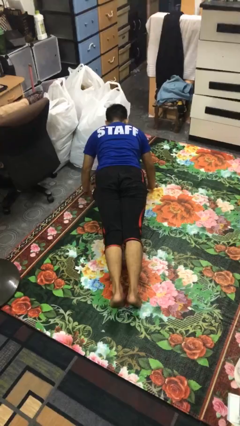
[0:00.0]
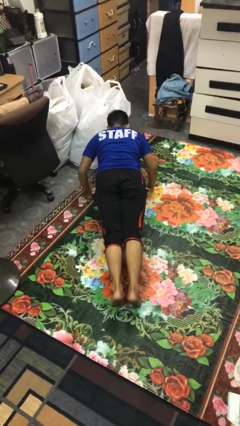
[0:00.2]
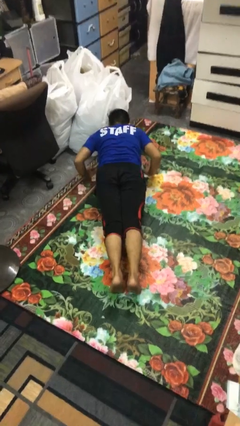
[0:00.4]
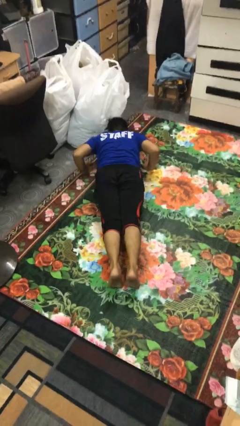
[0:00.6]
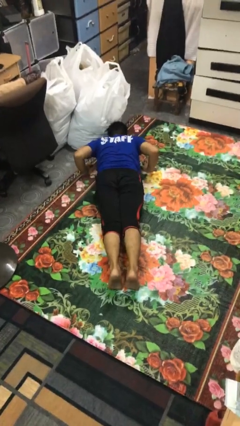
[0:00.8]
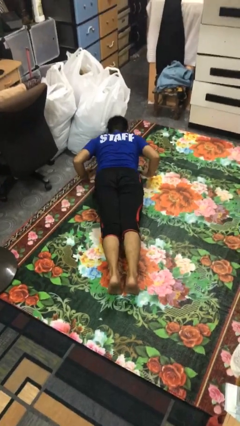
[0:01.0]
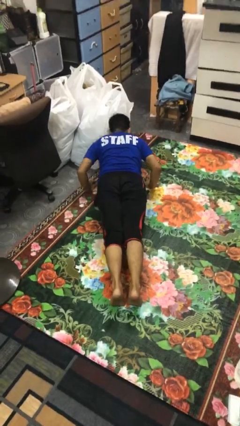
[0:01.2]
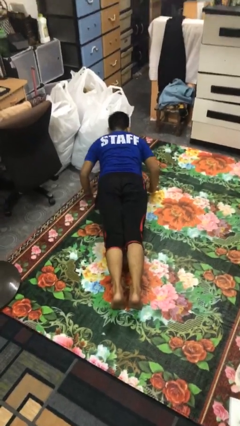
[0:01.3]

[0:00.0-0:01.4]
person exercises with pushup

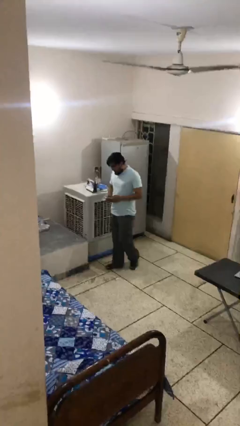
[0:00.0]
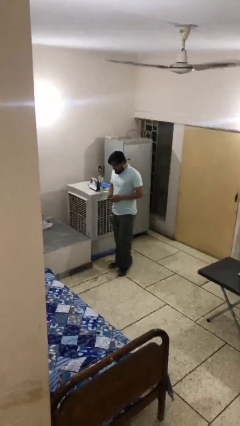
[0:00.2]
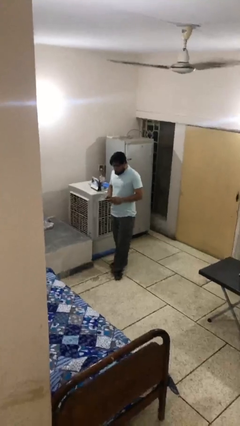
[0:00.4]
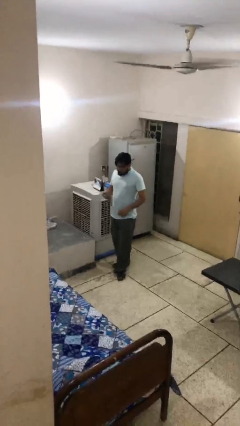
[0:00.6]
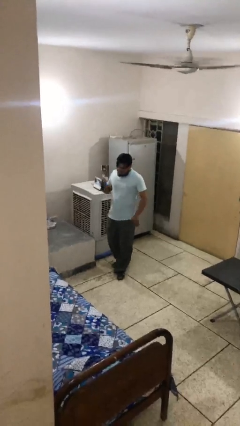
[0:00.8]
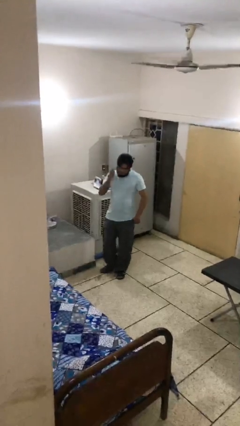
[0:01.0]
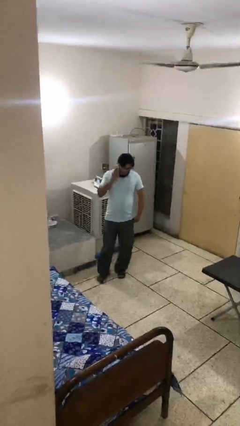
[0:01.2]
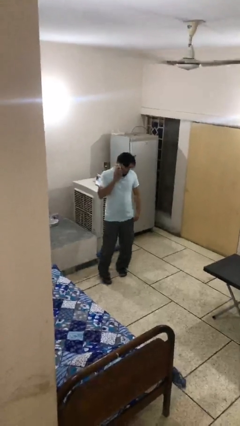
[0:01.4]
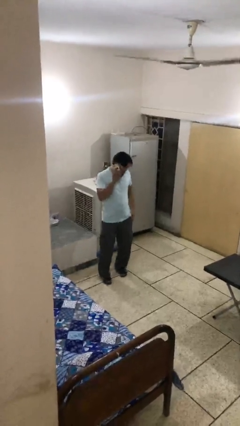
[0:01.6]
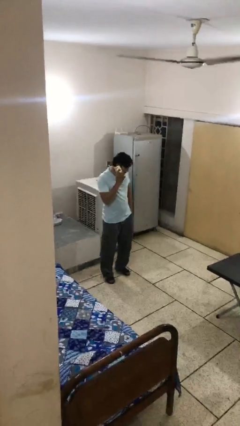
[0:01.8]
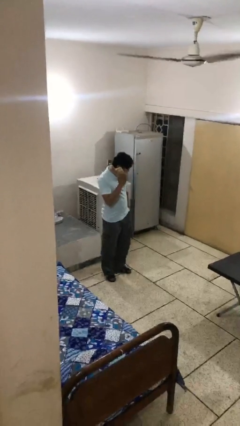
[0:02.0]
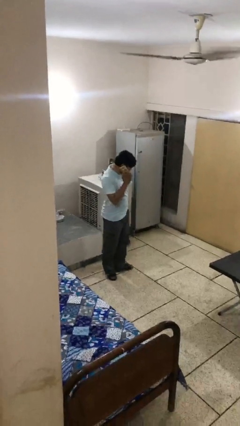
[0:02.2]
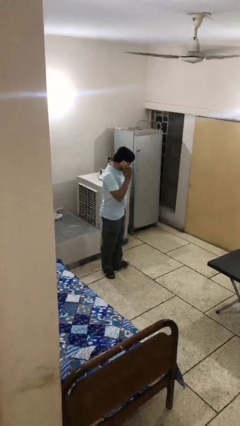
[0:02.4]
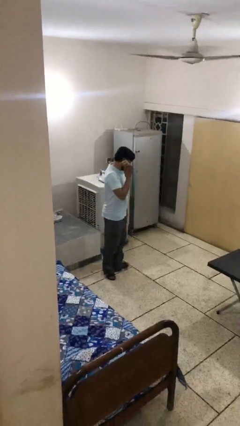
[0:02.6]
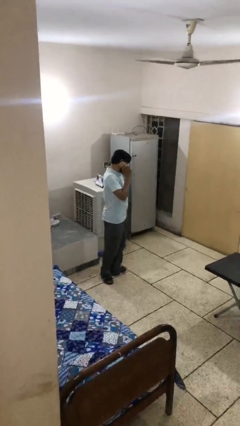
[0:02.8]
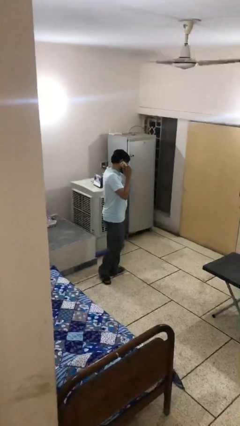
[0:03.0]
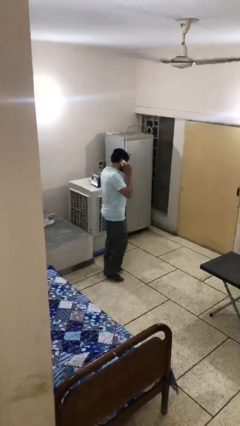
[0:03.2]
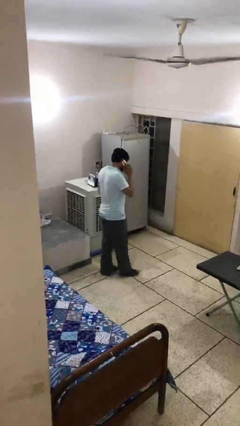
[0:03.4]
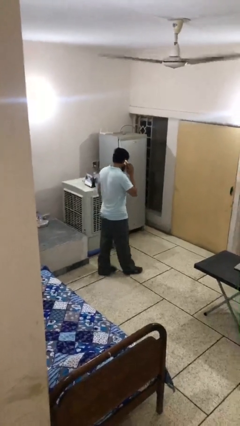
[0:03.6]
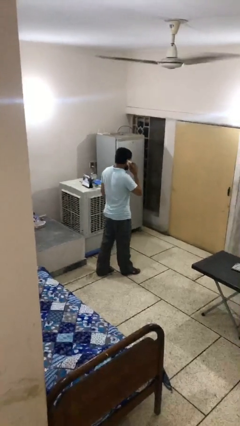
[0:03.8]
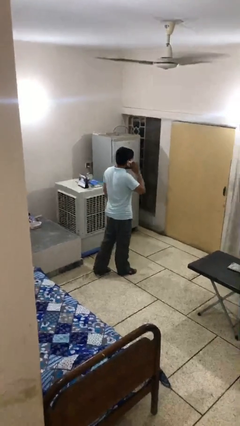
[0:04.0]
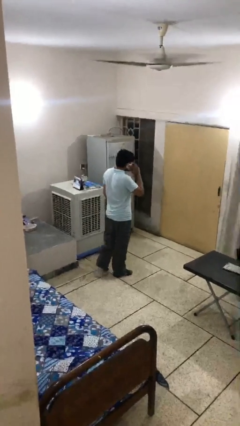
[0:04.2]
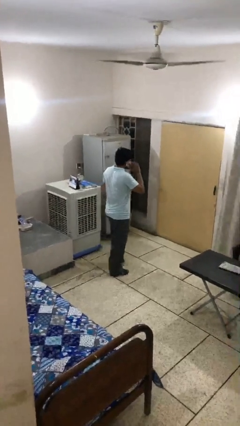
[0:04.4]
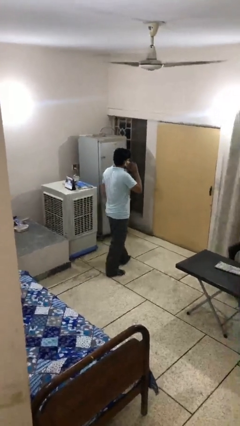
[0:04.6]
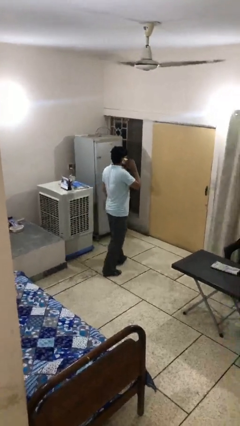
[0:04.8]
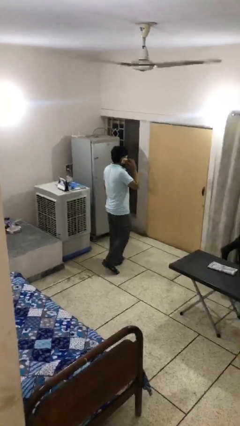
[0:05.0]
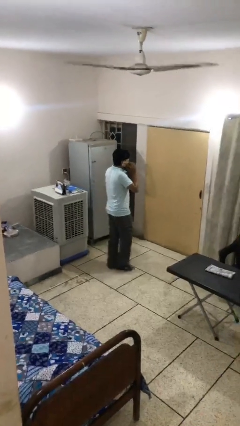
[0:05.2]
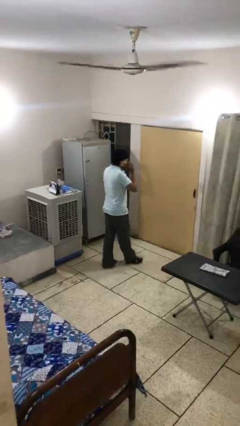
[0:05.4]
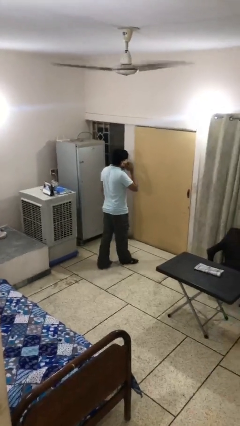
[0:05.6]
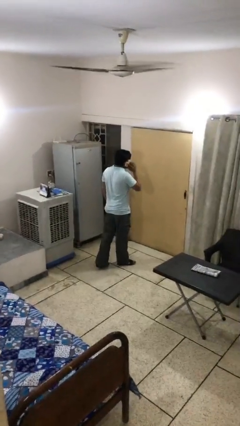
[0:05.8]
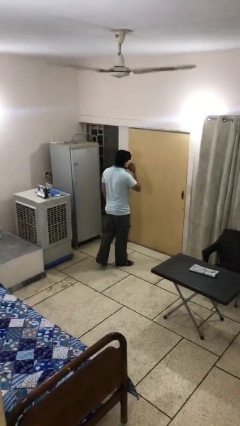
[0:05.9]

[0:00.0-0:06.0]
person talks on phone

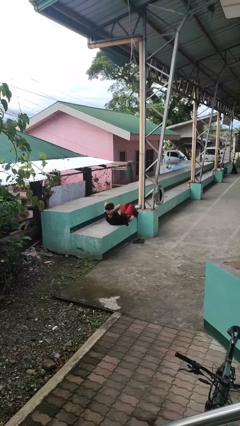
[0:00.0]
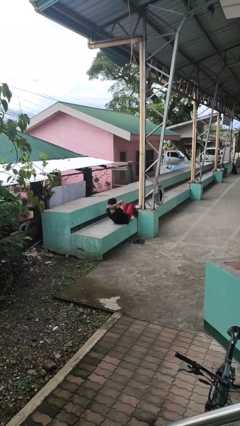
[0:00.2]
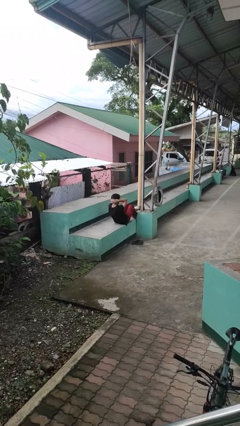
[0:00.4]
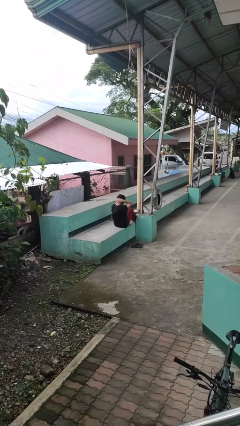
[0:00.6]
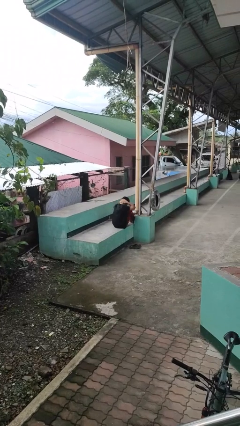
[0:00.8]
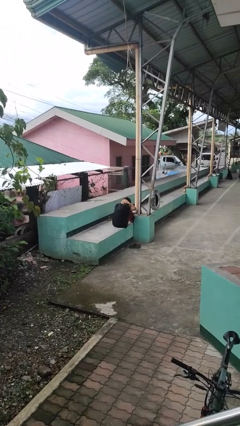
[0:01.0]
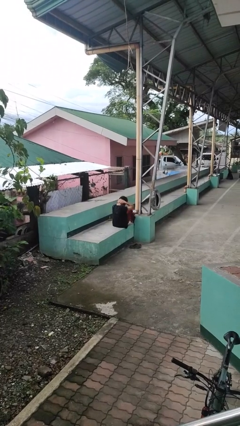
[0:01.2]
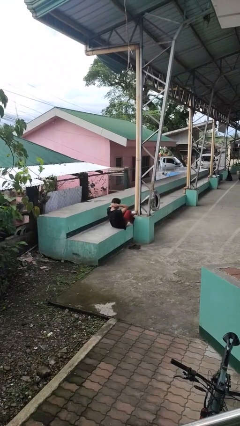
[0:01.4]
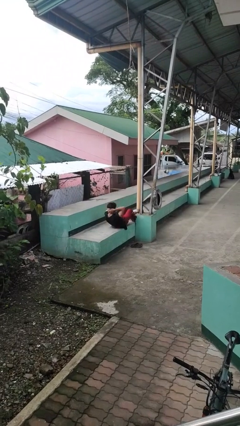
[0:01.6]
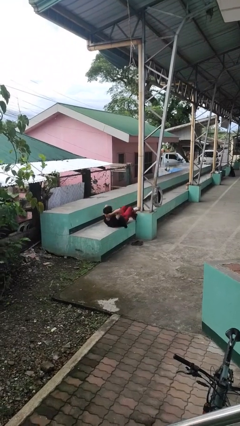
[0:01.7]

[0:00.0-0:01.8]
person exercises with situp

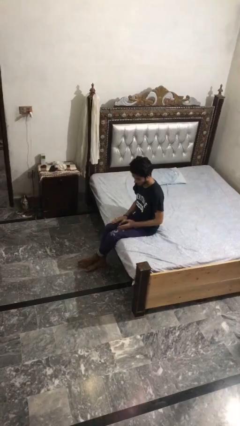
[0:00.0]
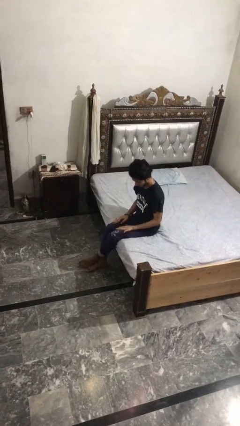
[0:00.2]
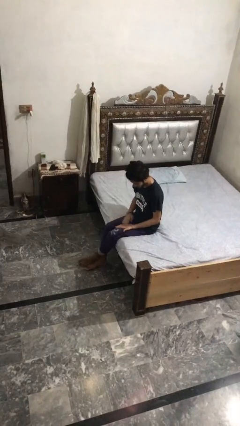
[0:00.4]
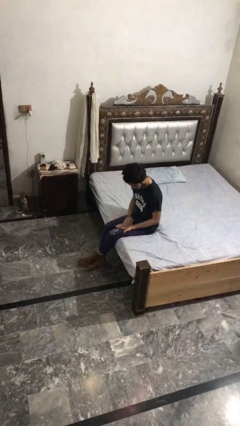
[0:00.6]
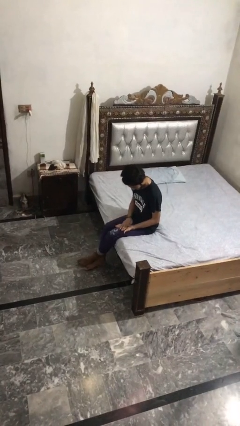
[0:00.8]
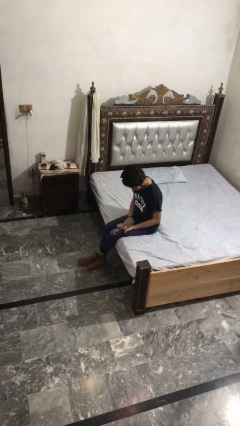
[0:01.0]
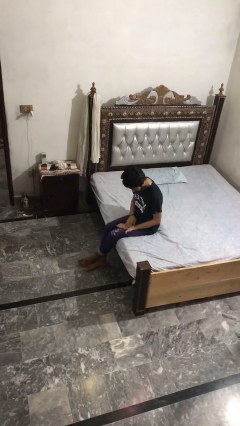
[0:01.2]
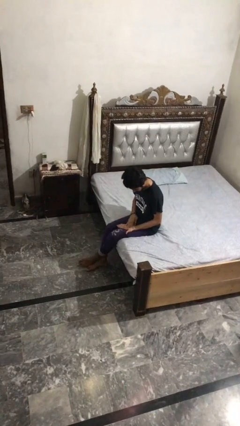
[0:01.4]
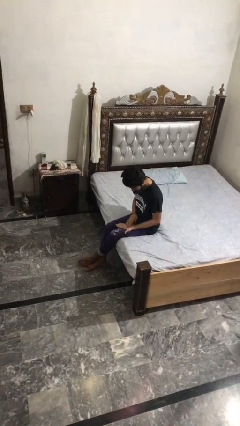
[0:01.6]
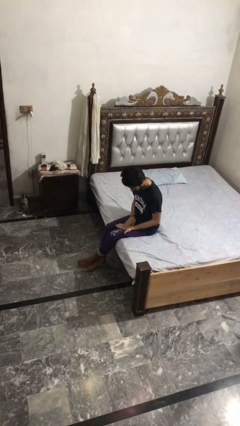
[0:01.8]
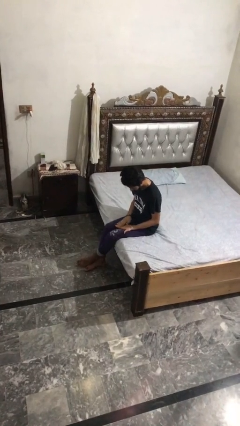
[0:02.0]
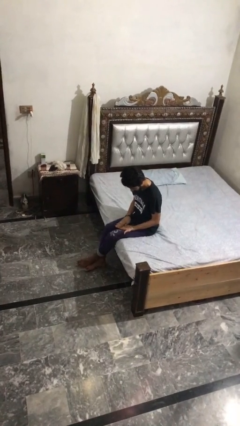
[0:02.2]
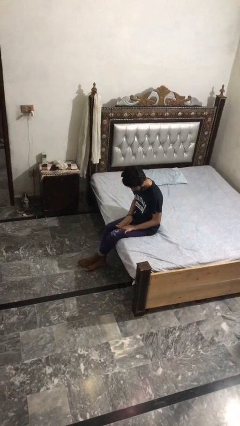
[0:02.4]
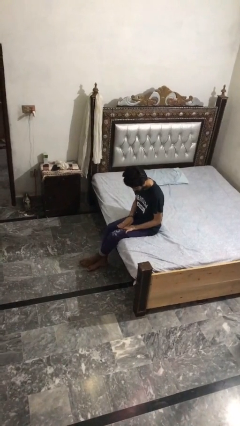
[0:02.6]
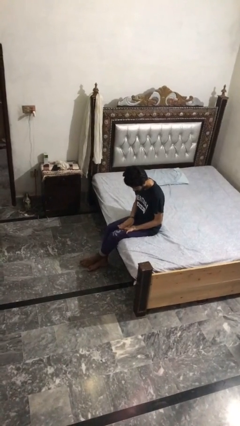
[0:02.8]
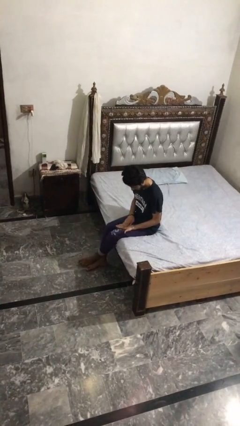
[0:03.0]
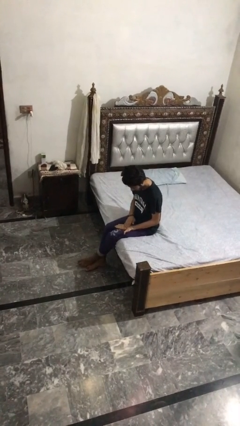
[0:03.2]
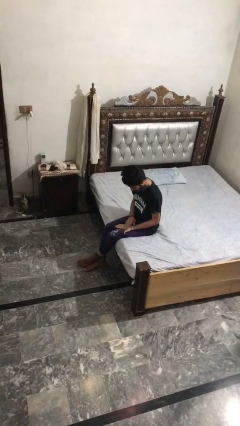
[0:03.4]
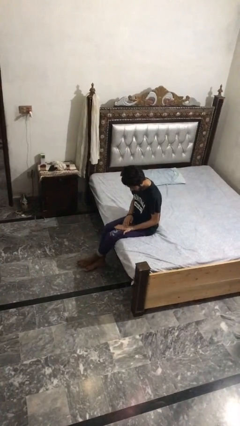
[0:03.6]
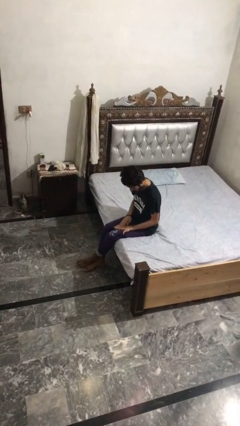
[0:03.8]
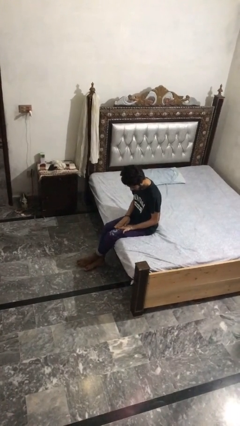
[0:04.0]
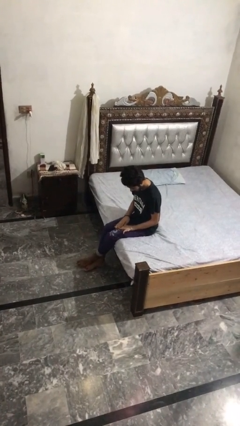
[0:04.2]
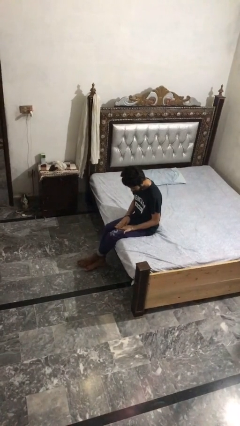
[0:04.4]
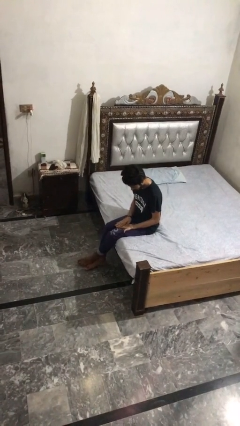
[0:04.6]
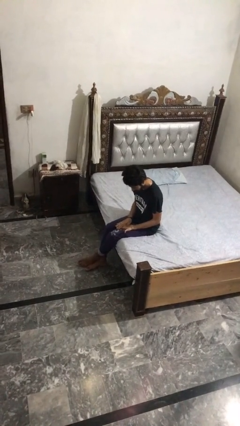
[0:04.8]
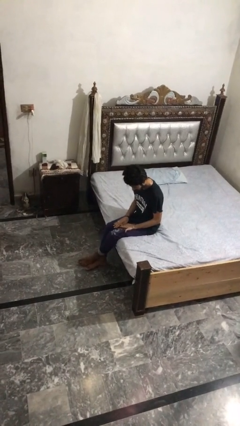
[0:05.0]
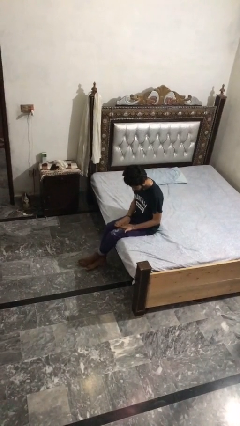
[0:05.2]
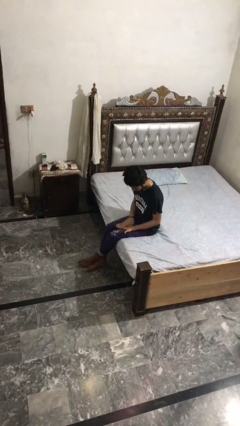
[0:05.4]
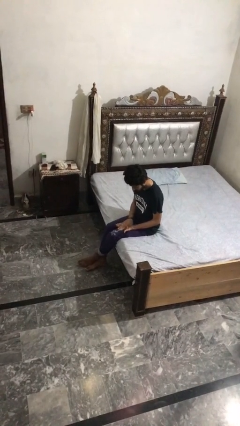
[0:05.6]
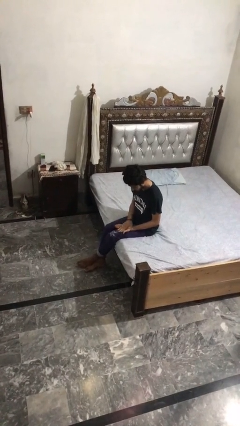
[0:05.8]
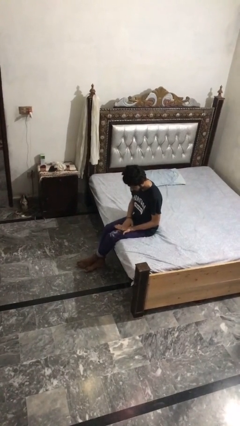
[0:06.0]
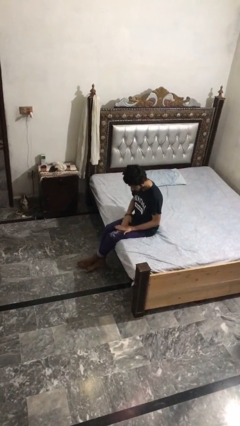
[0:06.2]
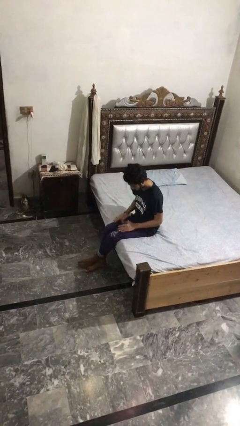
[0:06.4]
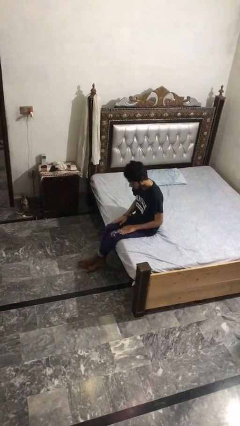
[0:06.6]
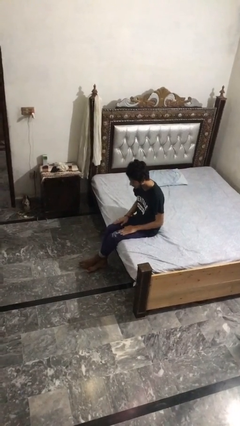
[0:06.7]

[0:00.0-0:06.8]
person looks at hands in lap

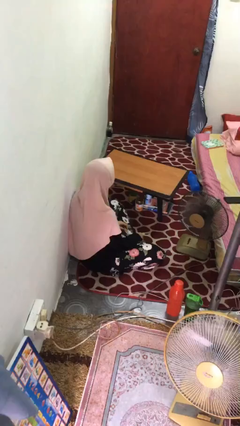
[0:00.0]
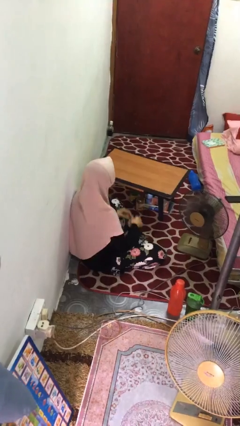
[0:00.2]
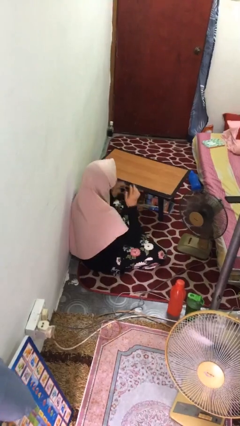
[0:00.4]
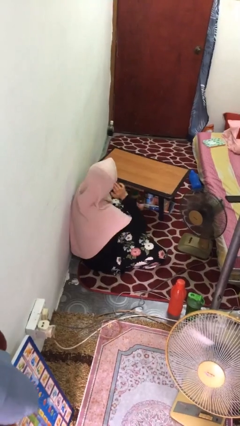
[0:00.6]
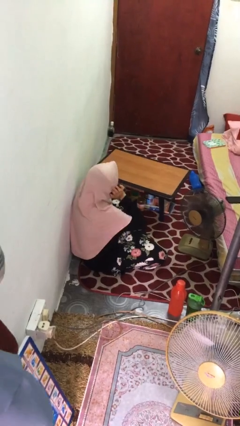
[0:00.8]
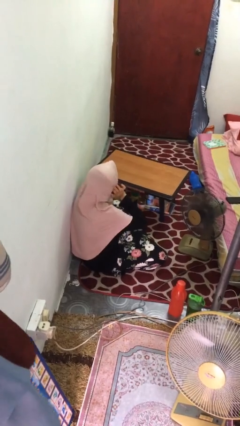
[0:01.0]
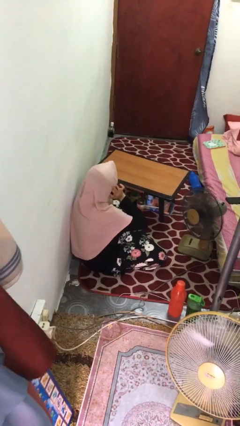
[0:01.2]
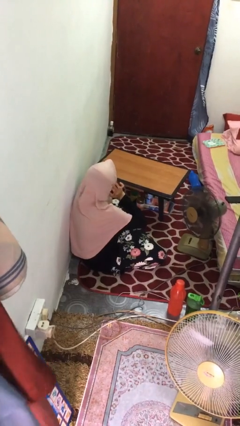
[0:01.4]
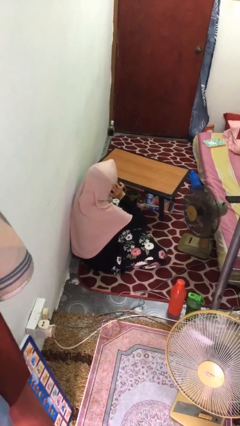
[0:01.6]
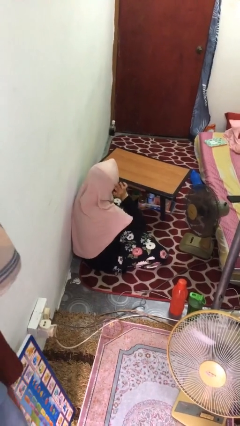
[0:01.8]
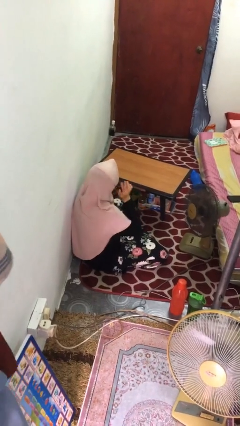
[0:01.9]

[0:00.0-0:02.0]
person puts fingers in ear
